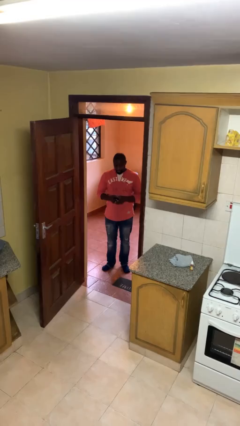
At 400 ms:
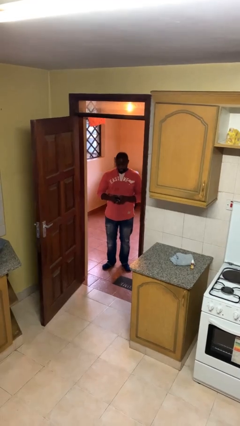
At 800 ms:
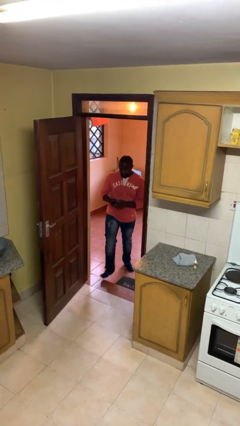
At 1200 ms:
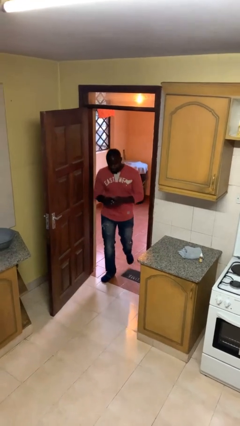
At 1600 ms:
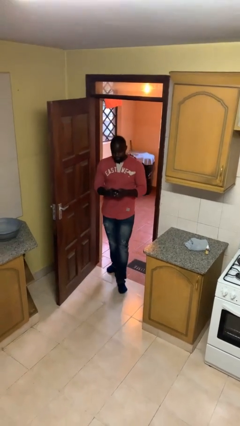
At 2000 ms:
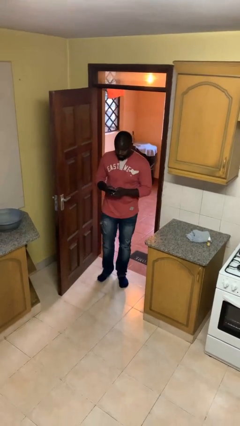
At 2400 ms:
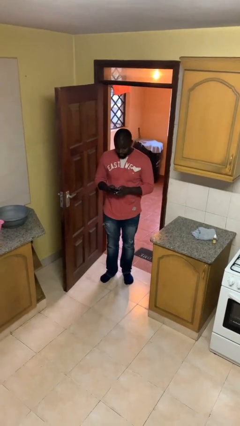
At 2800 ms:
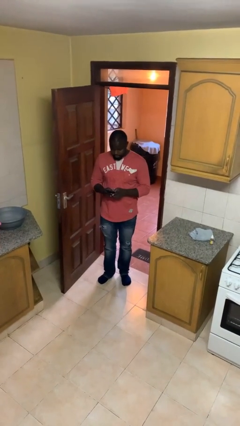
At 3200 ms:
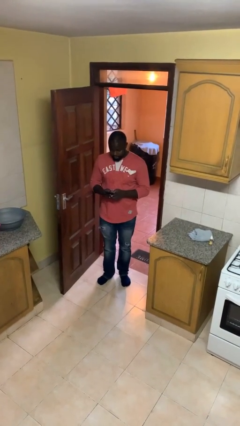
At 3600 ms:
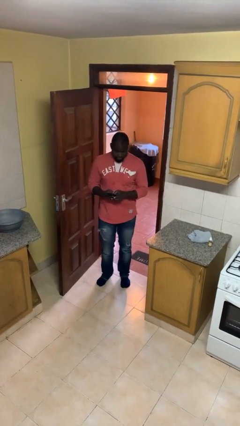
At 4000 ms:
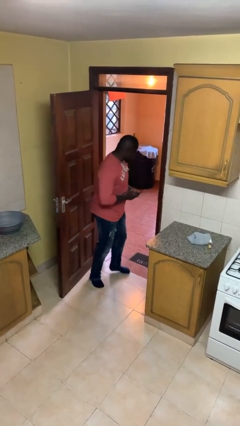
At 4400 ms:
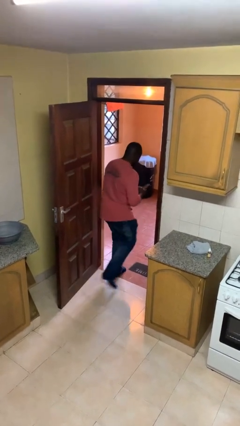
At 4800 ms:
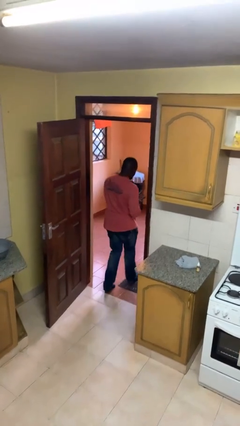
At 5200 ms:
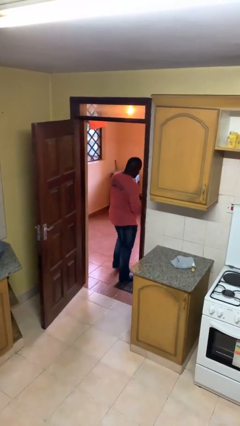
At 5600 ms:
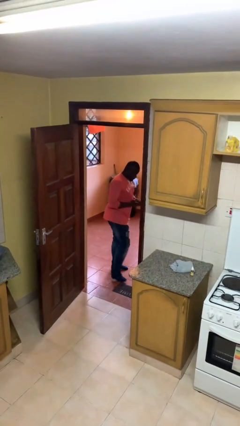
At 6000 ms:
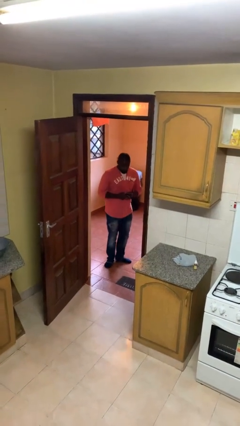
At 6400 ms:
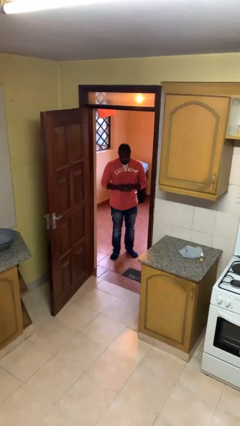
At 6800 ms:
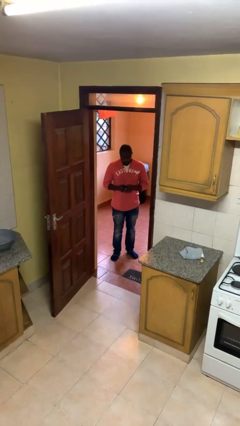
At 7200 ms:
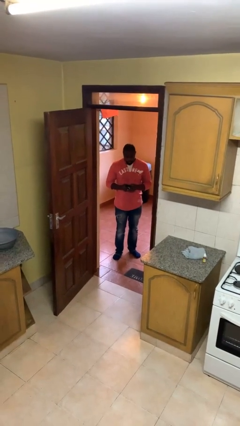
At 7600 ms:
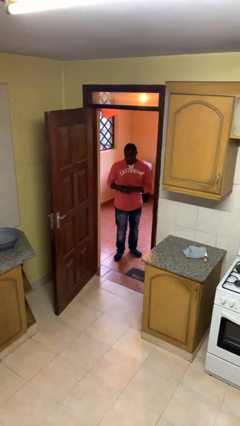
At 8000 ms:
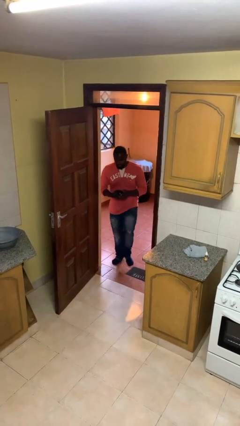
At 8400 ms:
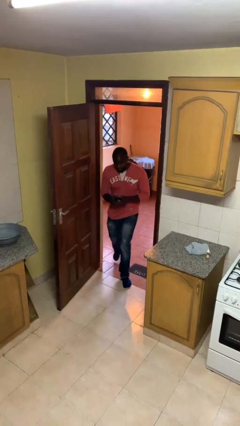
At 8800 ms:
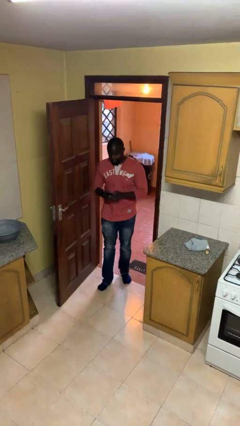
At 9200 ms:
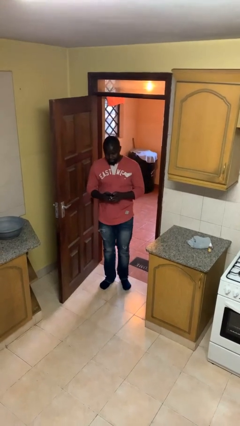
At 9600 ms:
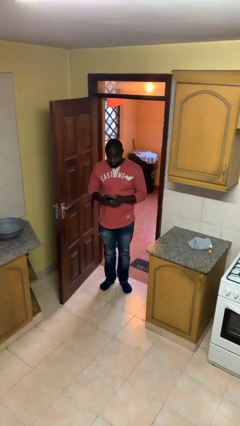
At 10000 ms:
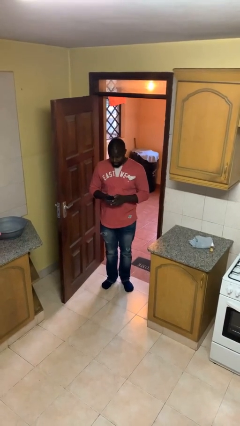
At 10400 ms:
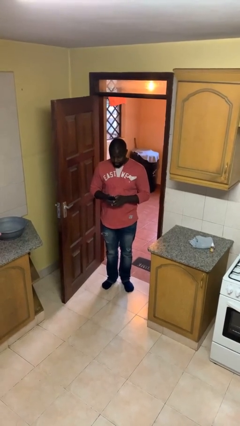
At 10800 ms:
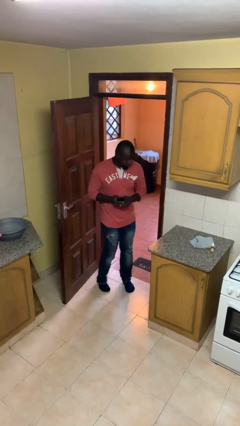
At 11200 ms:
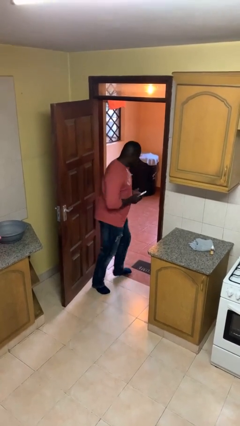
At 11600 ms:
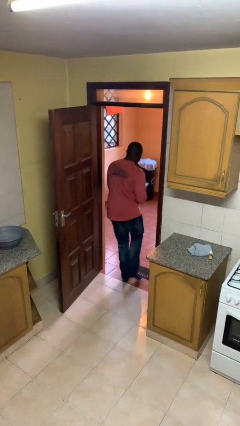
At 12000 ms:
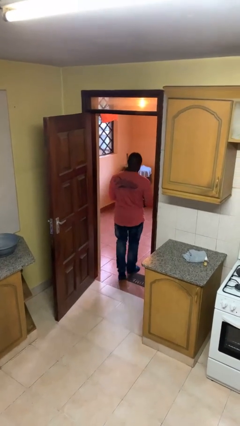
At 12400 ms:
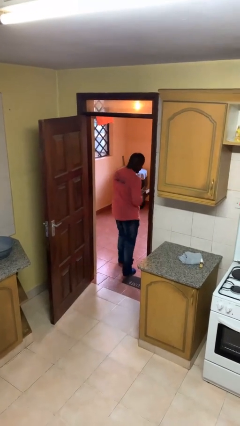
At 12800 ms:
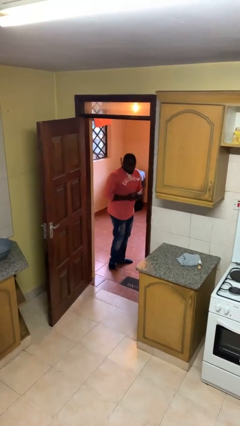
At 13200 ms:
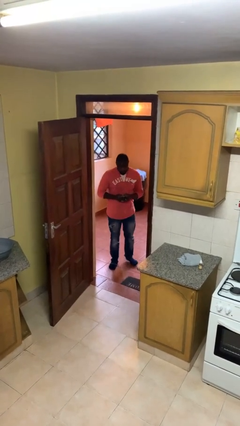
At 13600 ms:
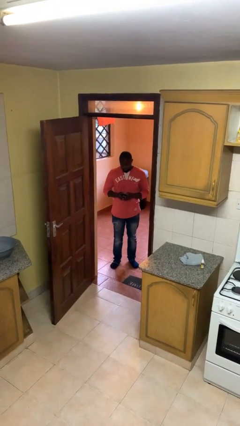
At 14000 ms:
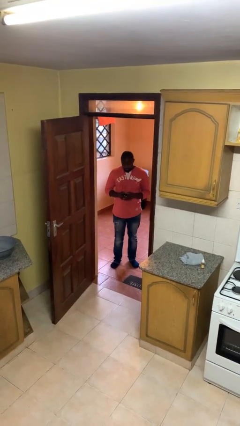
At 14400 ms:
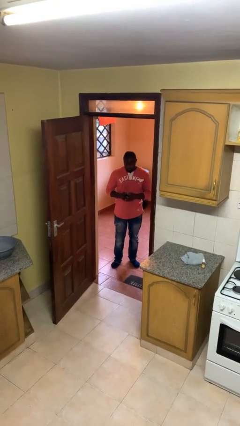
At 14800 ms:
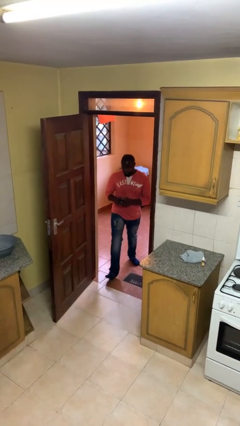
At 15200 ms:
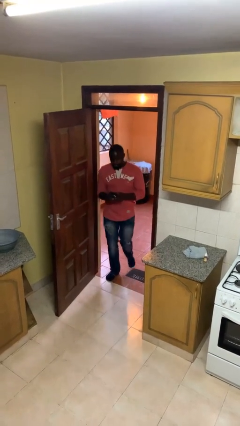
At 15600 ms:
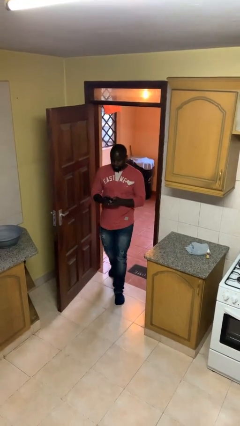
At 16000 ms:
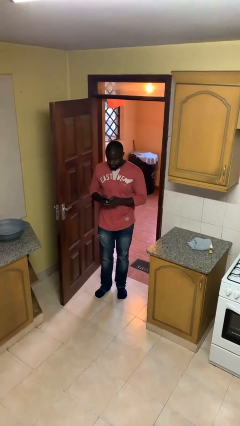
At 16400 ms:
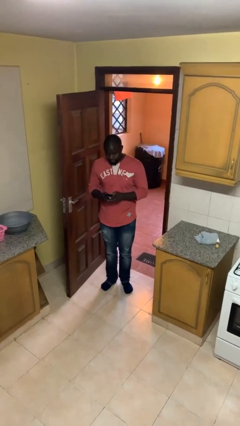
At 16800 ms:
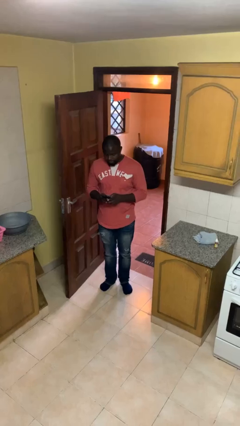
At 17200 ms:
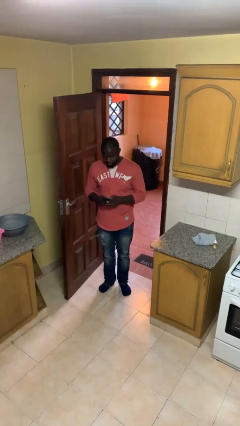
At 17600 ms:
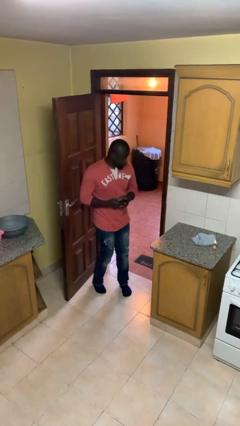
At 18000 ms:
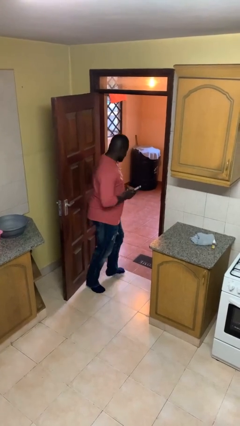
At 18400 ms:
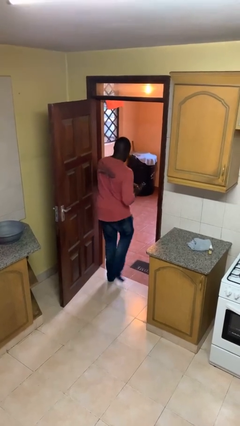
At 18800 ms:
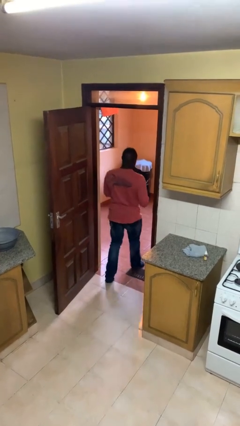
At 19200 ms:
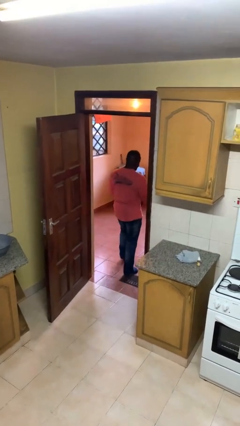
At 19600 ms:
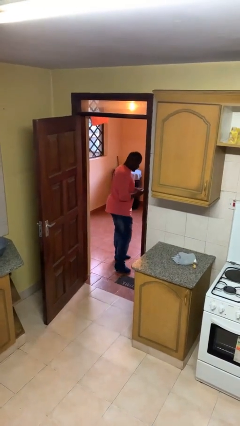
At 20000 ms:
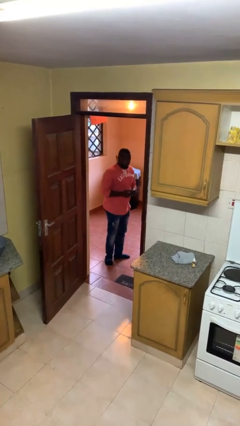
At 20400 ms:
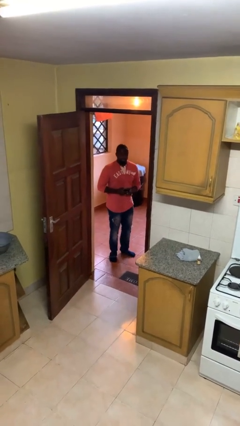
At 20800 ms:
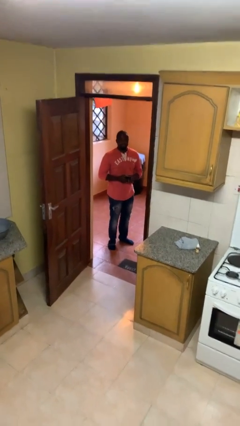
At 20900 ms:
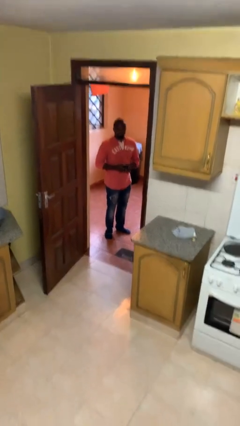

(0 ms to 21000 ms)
person texts on phone

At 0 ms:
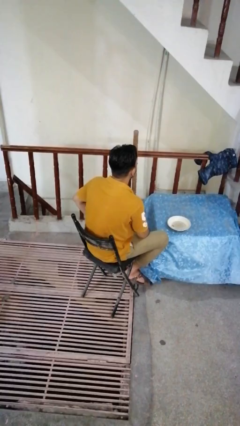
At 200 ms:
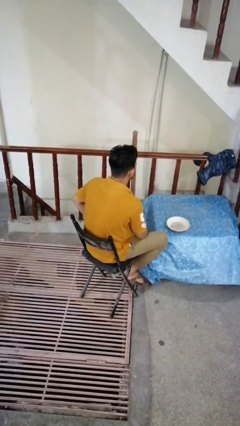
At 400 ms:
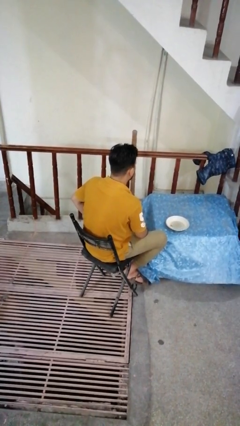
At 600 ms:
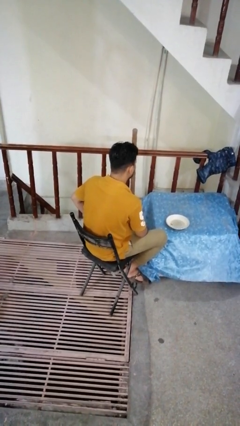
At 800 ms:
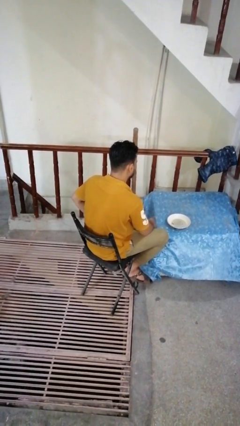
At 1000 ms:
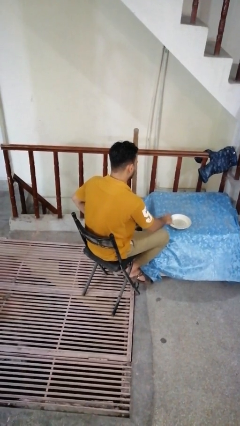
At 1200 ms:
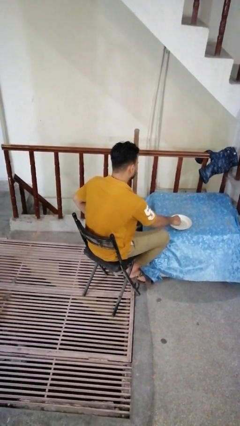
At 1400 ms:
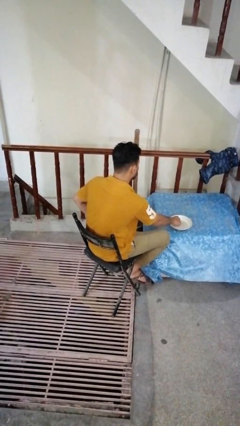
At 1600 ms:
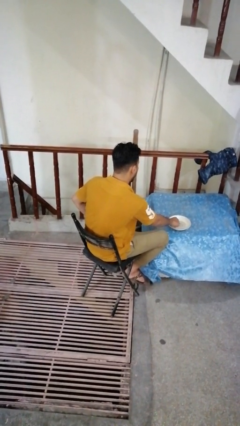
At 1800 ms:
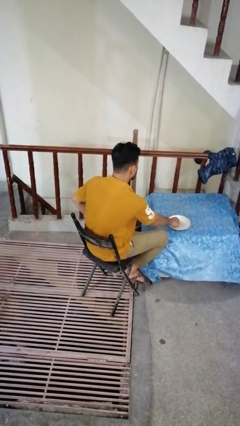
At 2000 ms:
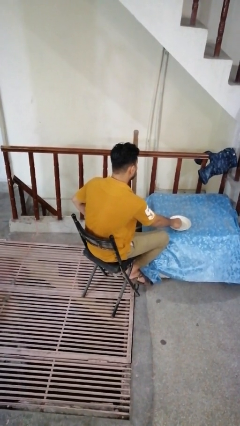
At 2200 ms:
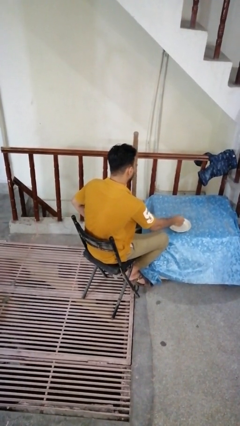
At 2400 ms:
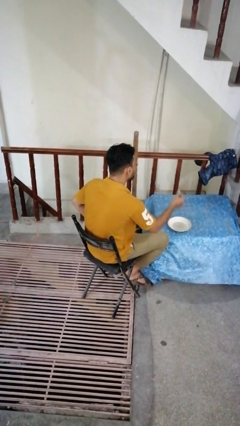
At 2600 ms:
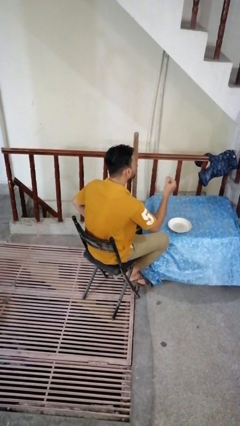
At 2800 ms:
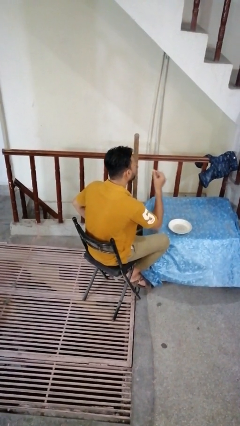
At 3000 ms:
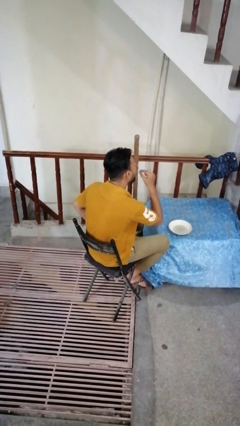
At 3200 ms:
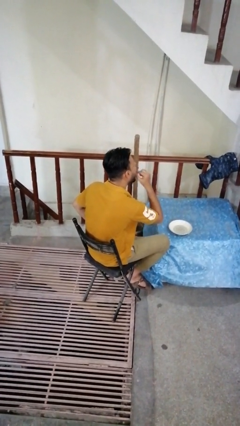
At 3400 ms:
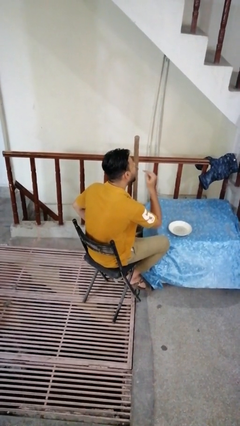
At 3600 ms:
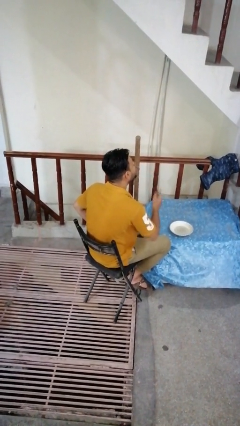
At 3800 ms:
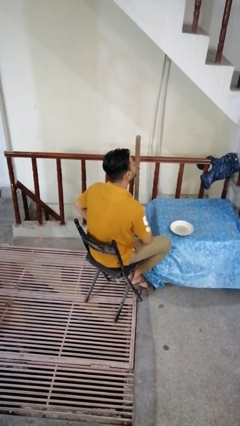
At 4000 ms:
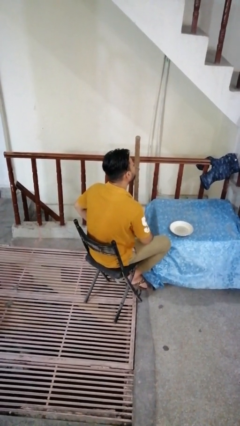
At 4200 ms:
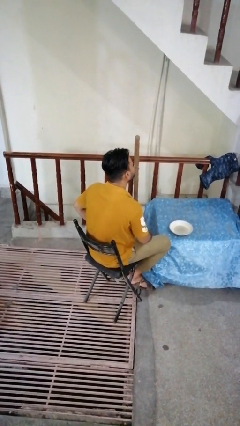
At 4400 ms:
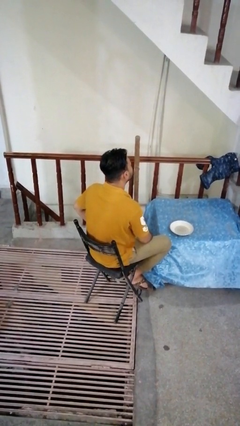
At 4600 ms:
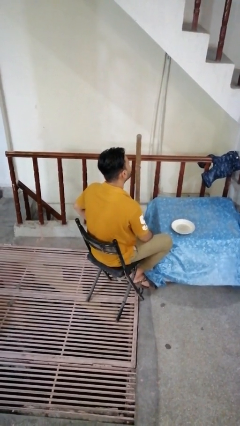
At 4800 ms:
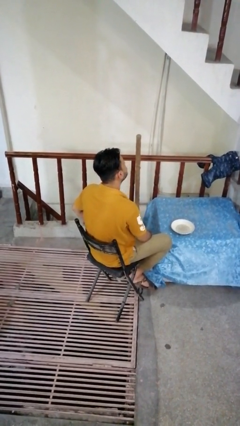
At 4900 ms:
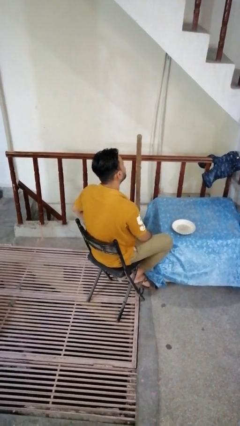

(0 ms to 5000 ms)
person eats with hands

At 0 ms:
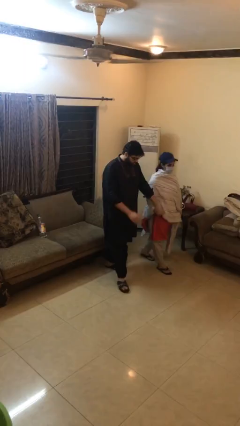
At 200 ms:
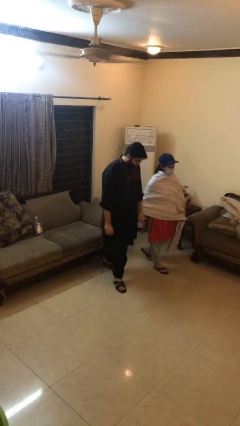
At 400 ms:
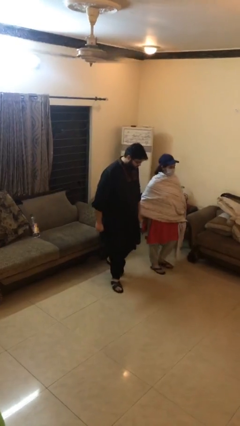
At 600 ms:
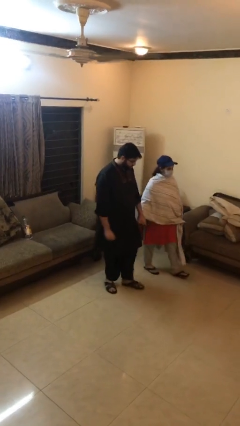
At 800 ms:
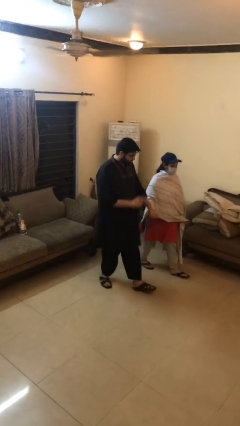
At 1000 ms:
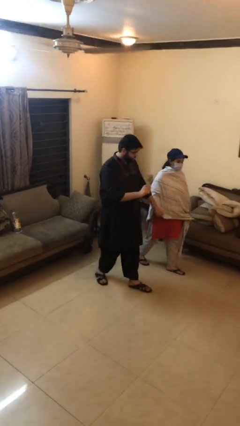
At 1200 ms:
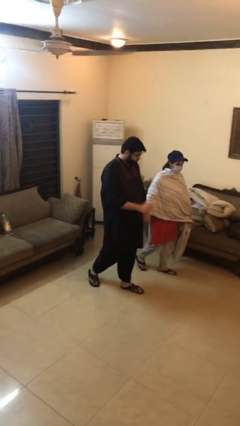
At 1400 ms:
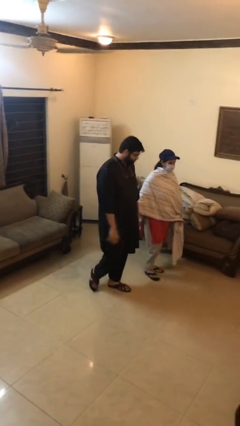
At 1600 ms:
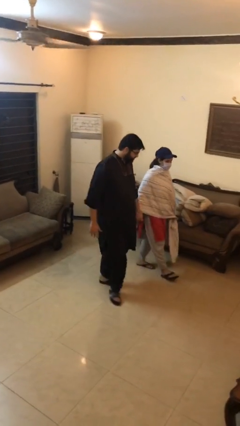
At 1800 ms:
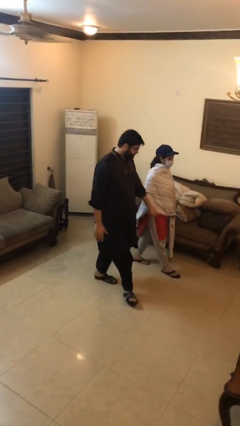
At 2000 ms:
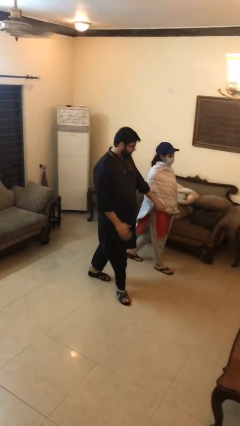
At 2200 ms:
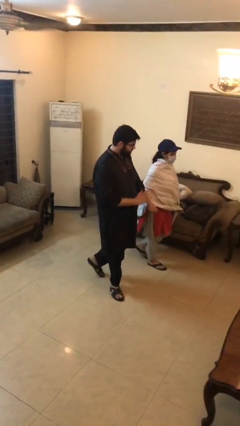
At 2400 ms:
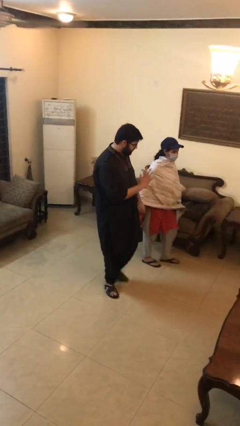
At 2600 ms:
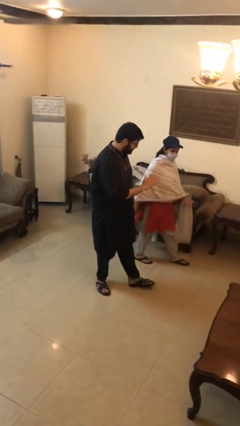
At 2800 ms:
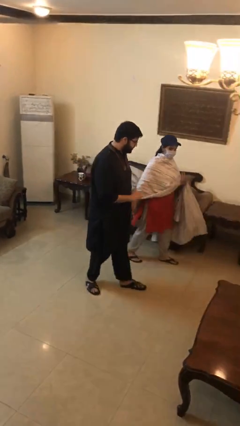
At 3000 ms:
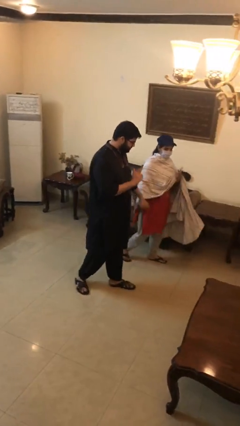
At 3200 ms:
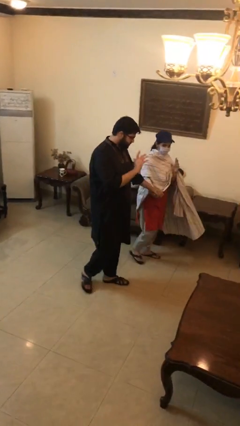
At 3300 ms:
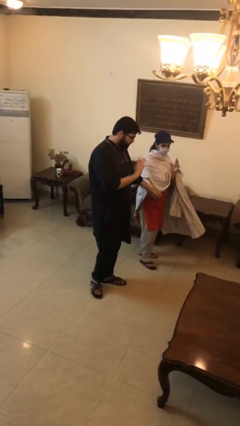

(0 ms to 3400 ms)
person holds hand
